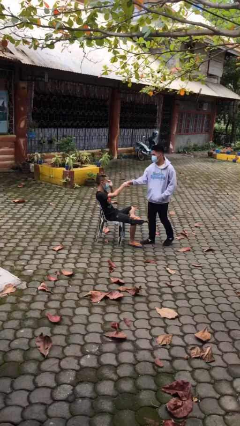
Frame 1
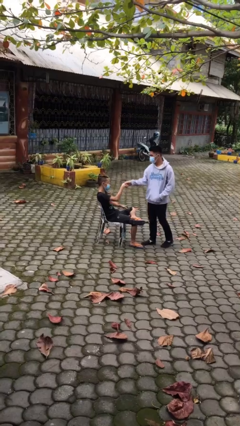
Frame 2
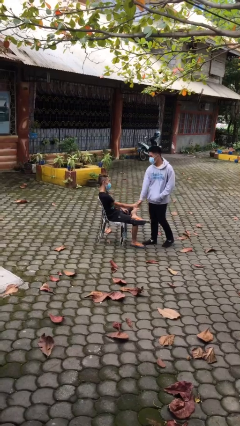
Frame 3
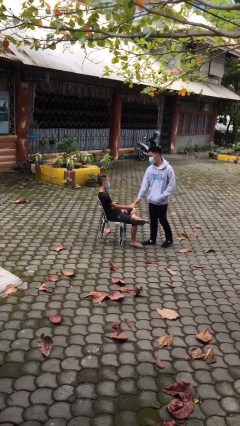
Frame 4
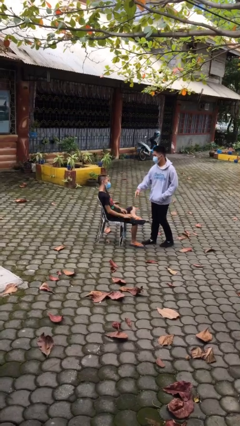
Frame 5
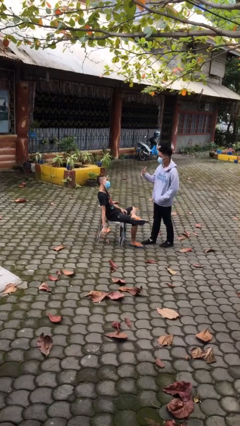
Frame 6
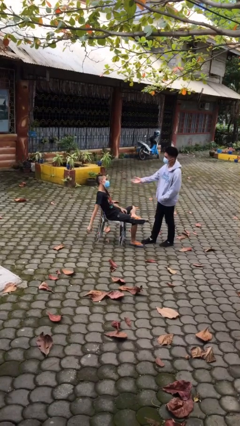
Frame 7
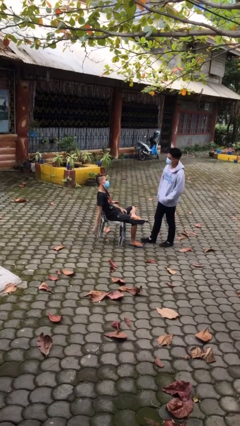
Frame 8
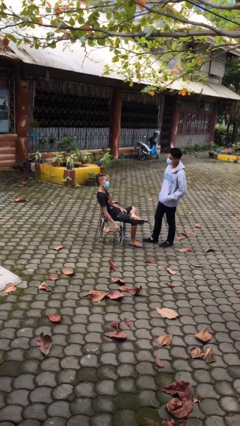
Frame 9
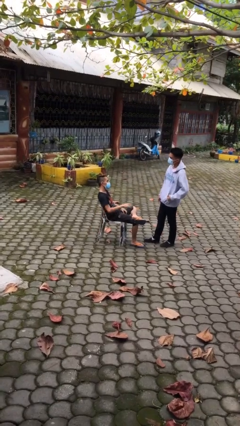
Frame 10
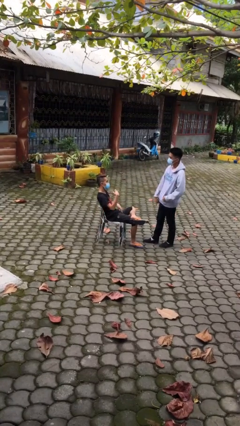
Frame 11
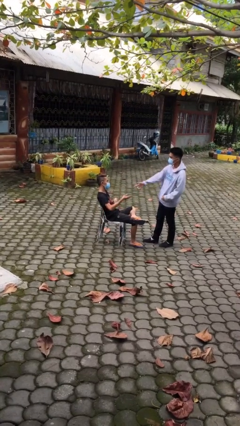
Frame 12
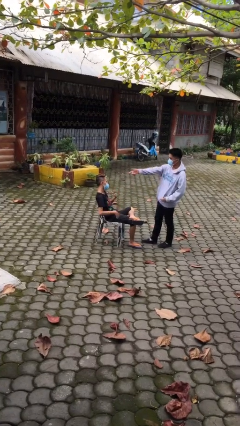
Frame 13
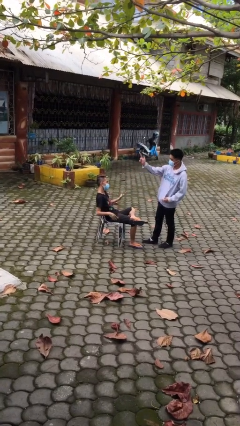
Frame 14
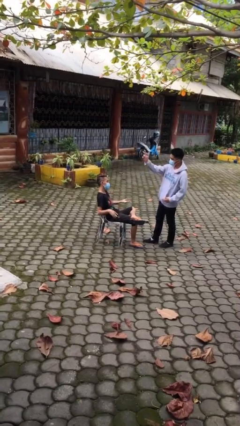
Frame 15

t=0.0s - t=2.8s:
person shakes hand

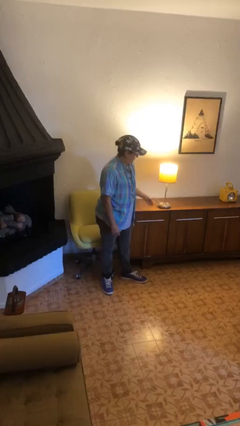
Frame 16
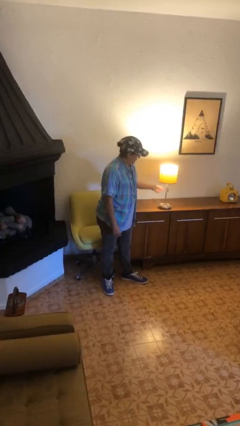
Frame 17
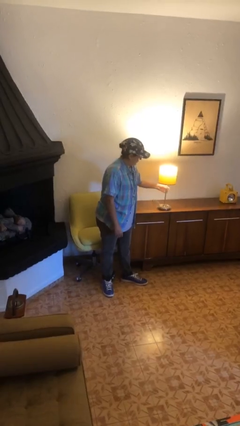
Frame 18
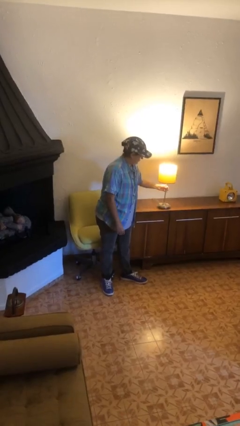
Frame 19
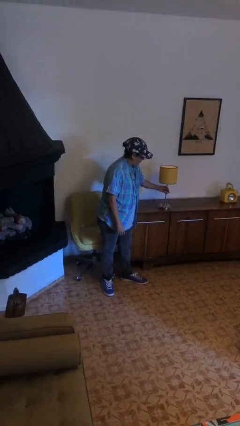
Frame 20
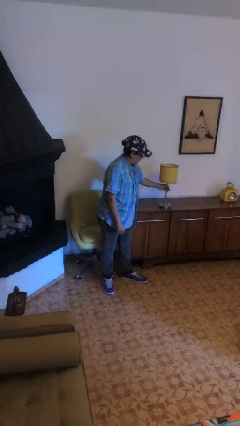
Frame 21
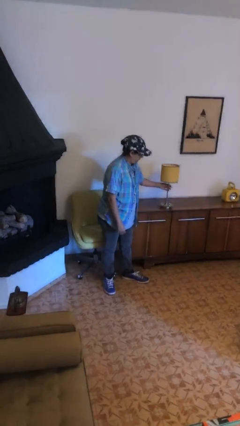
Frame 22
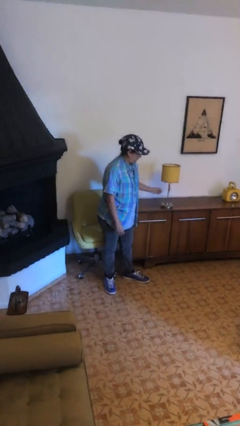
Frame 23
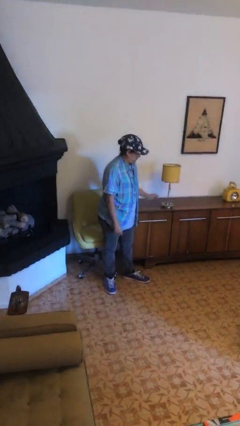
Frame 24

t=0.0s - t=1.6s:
person turns off lamp

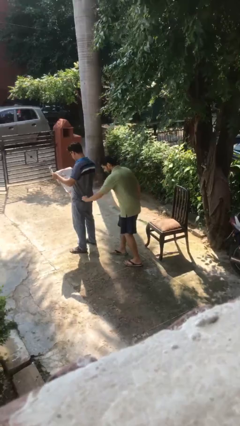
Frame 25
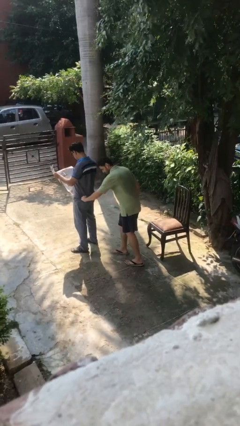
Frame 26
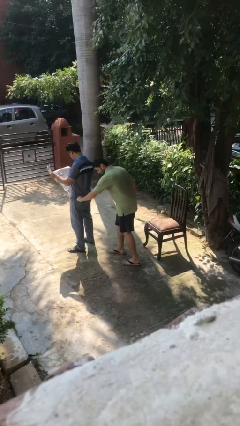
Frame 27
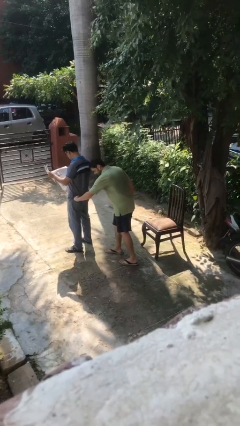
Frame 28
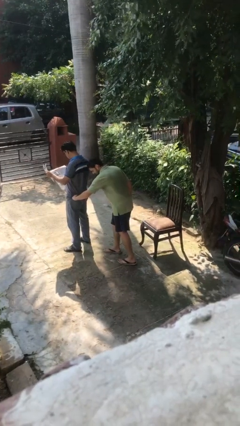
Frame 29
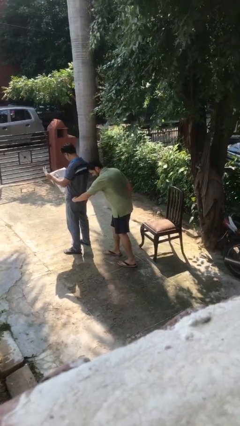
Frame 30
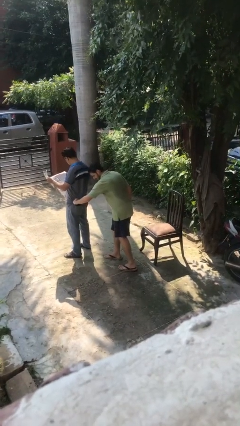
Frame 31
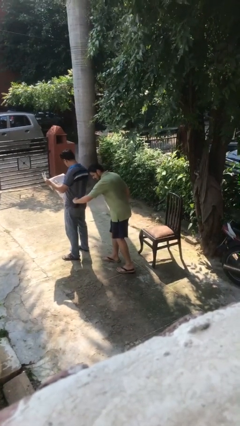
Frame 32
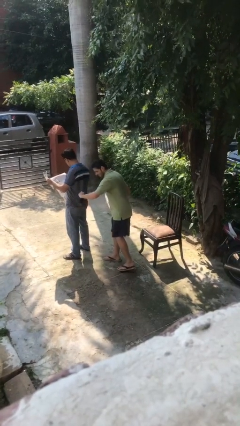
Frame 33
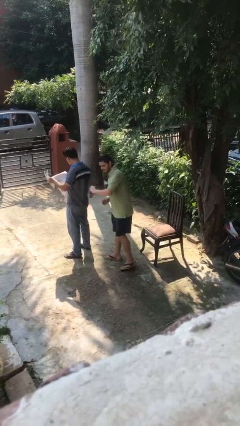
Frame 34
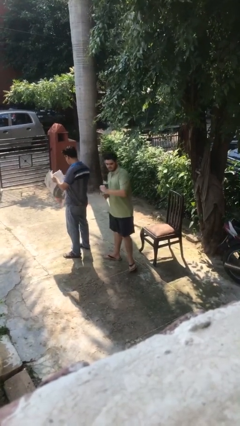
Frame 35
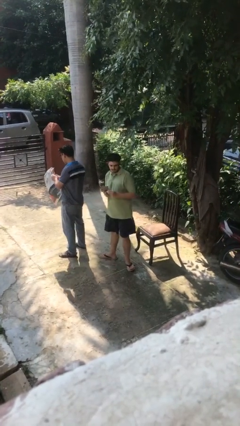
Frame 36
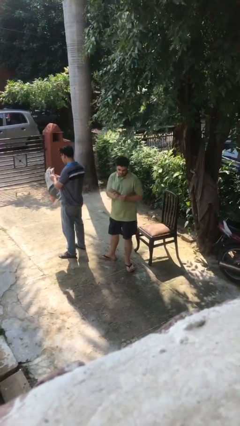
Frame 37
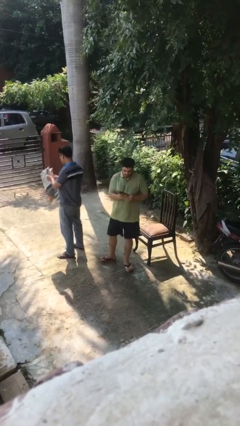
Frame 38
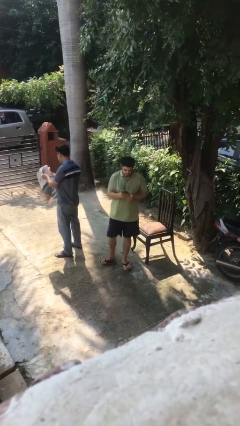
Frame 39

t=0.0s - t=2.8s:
person steals object from person

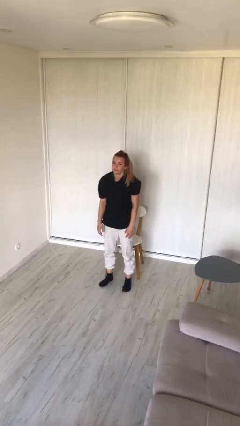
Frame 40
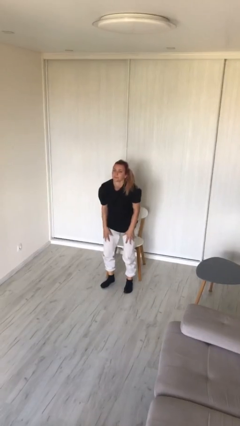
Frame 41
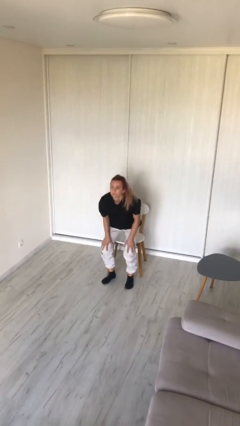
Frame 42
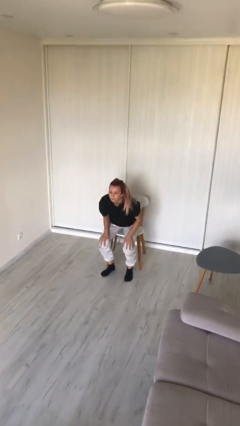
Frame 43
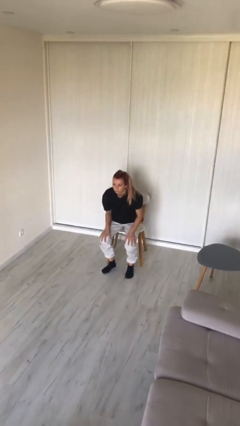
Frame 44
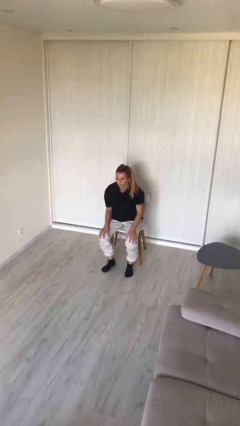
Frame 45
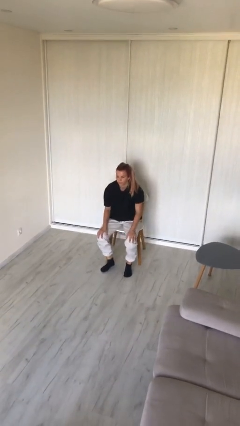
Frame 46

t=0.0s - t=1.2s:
person sits down

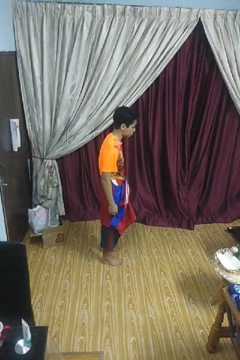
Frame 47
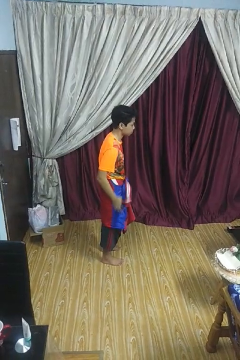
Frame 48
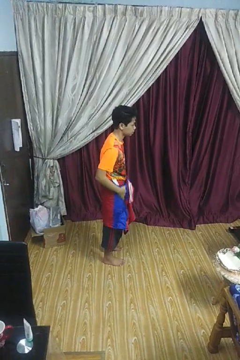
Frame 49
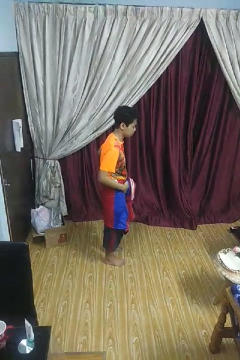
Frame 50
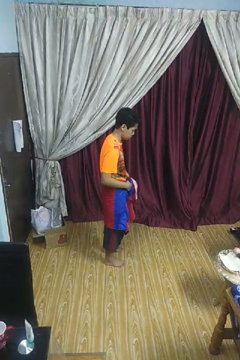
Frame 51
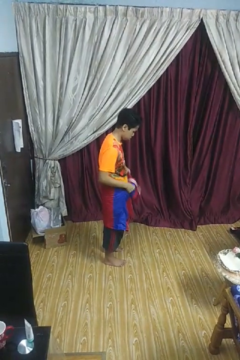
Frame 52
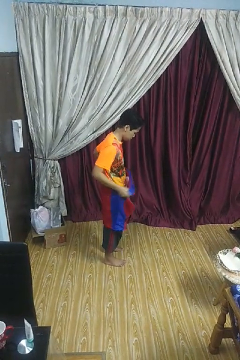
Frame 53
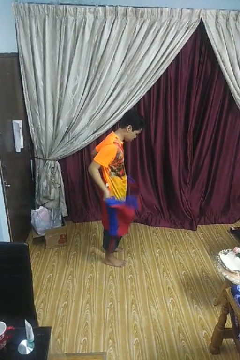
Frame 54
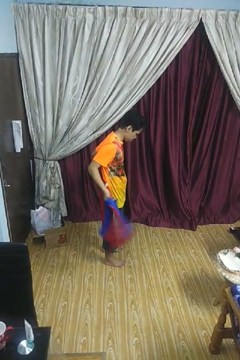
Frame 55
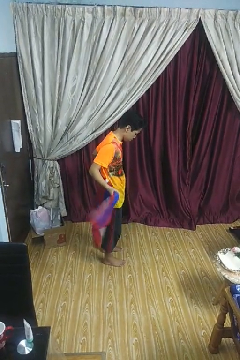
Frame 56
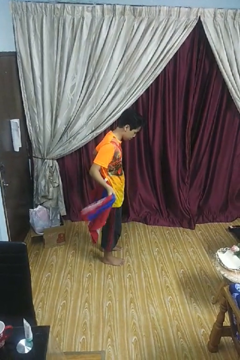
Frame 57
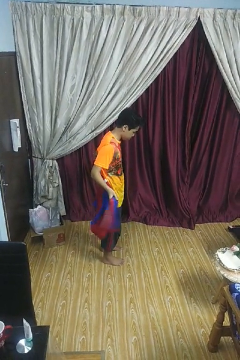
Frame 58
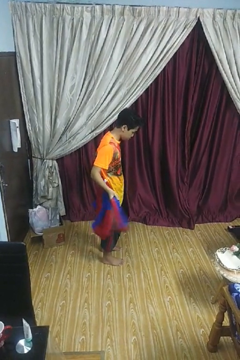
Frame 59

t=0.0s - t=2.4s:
person unties jacket around waist

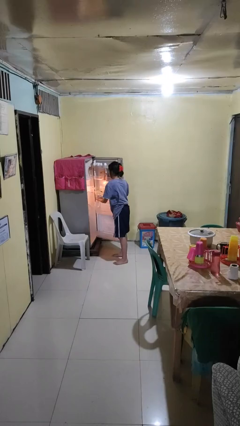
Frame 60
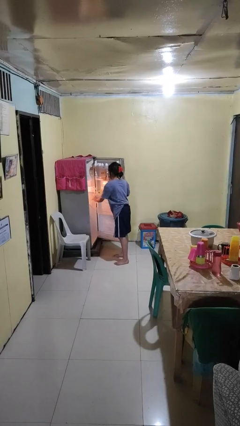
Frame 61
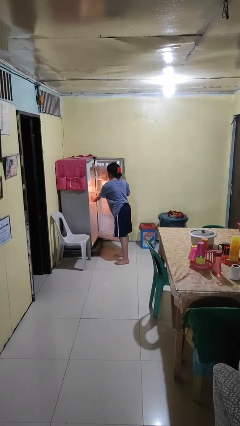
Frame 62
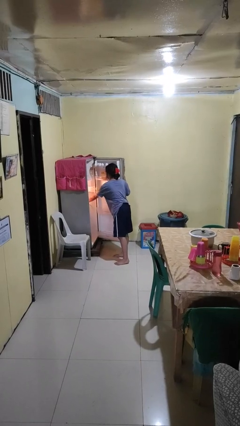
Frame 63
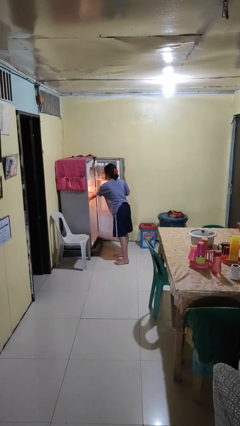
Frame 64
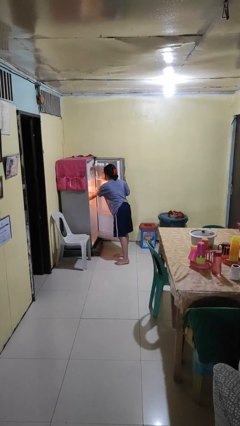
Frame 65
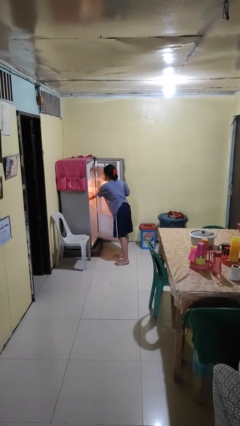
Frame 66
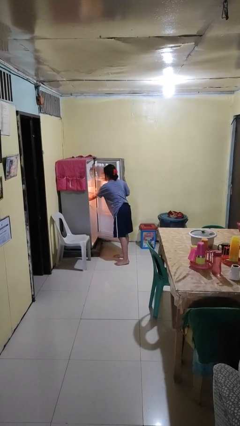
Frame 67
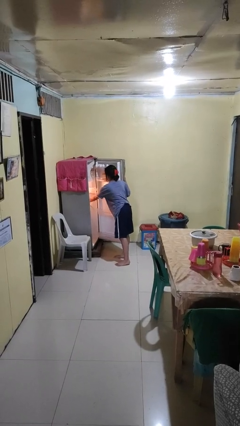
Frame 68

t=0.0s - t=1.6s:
person puts object into refrigerator

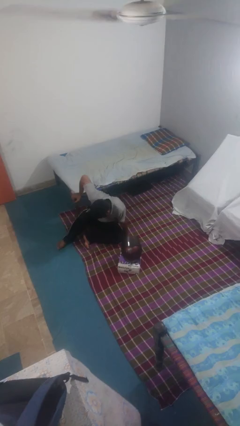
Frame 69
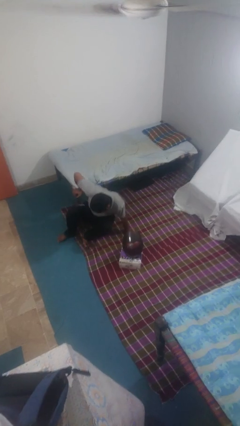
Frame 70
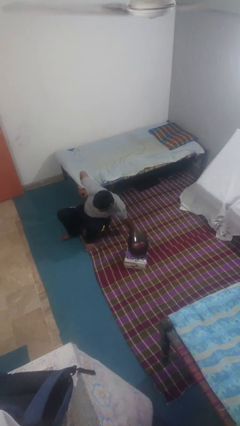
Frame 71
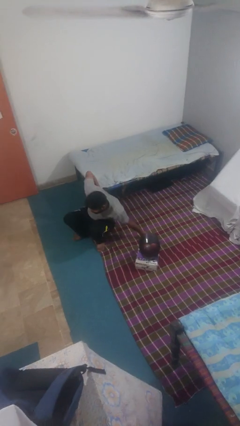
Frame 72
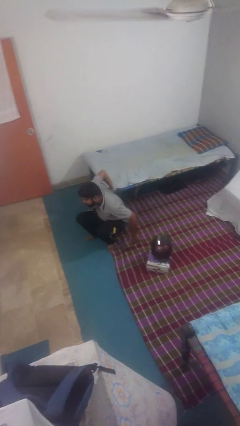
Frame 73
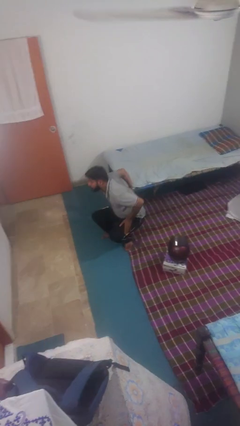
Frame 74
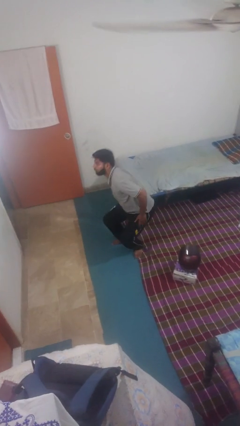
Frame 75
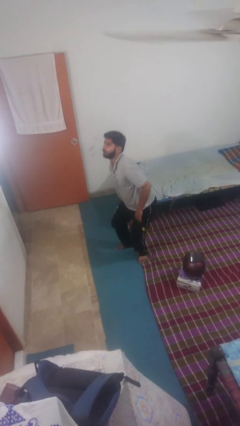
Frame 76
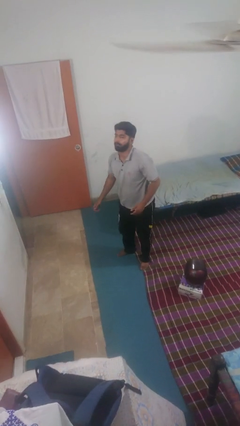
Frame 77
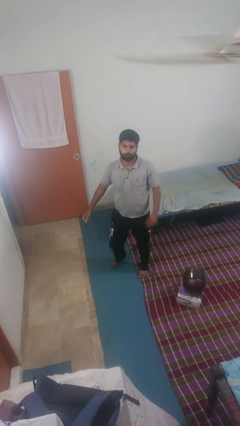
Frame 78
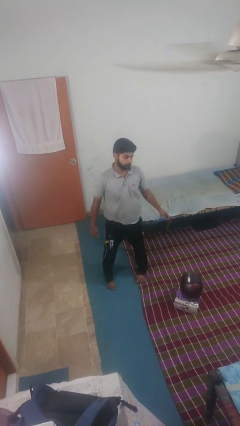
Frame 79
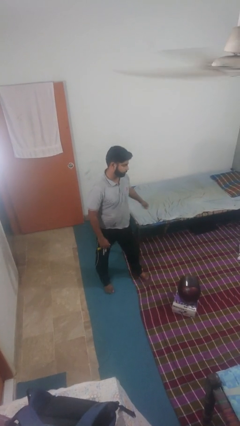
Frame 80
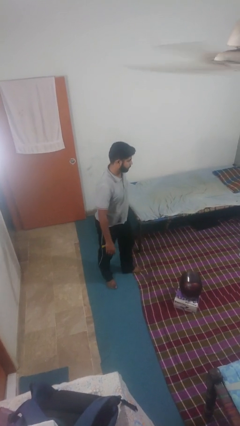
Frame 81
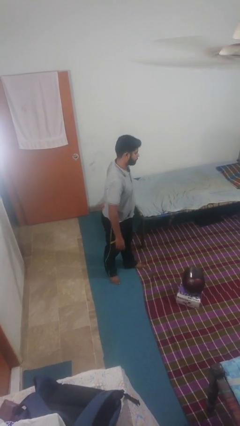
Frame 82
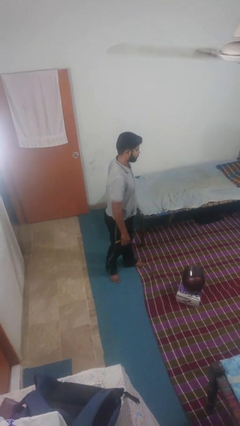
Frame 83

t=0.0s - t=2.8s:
person stands up from floor

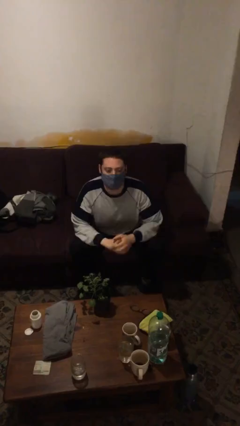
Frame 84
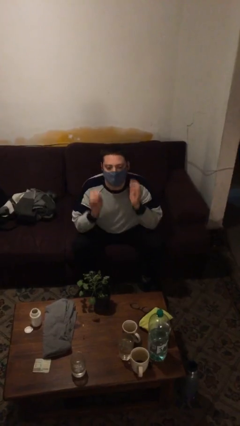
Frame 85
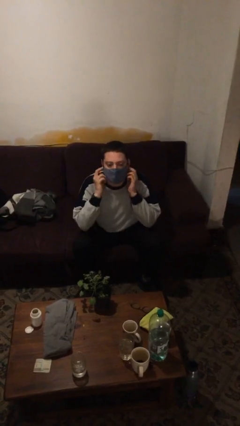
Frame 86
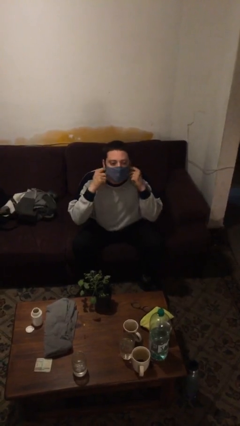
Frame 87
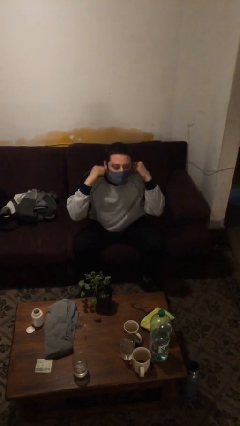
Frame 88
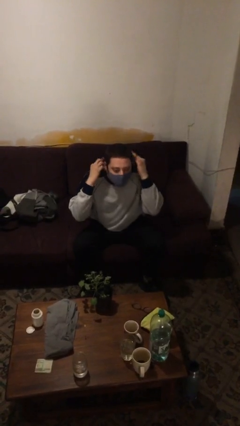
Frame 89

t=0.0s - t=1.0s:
person takes off facemask

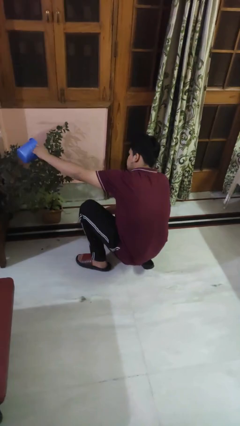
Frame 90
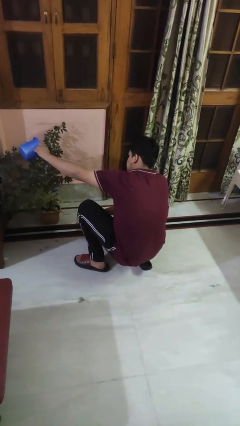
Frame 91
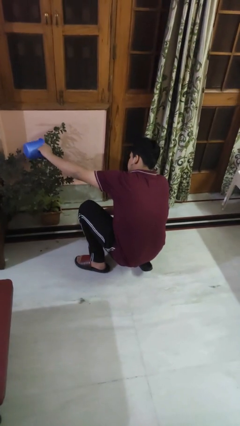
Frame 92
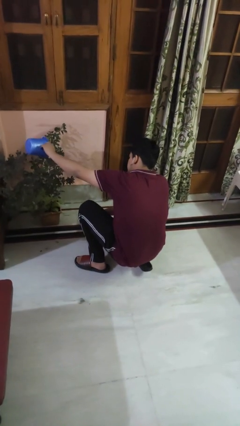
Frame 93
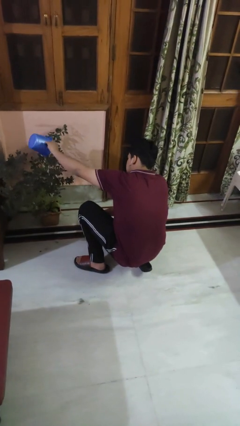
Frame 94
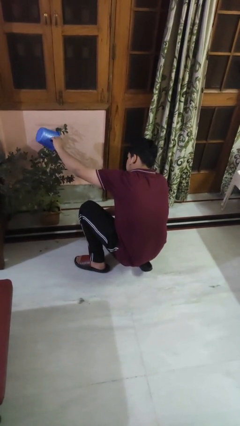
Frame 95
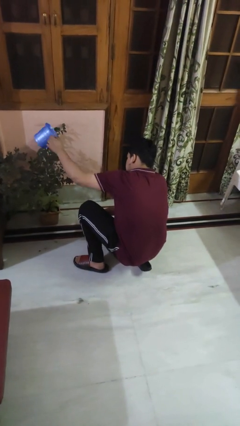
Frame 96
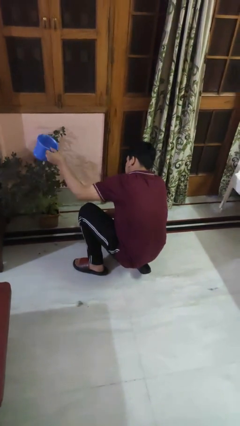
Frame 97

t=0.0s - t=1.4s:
person waters houseplant
